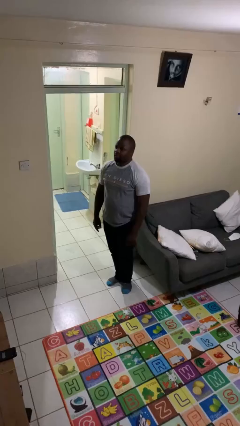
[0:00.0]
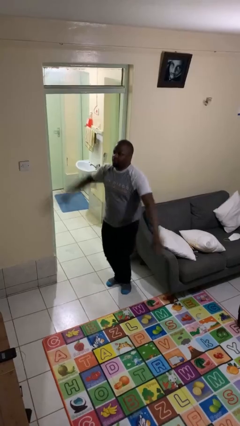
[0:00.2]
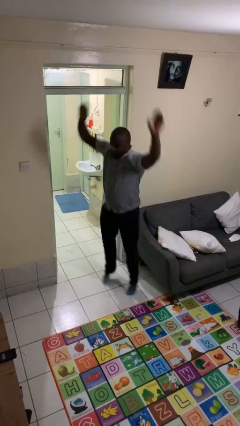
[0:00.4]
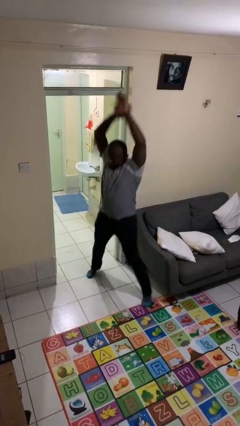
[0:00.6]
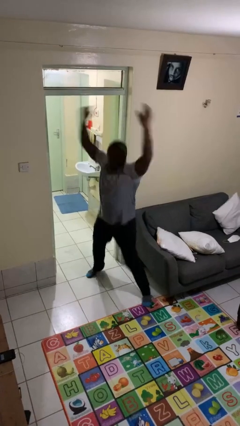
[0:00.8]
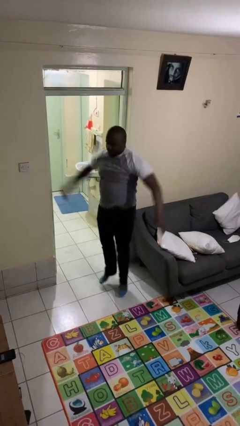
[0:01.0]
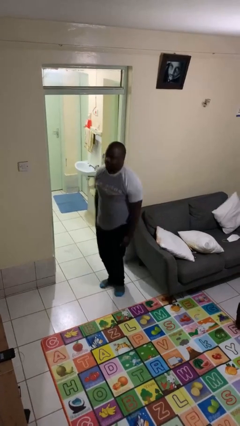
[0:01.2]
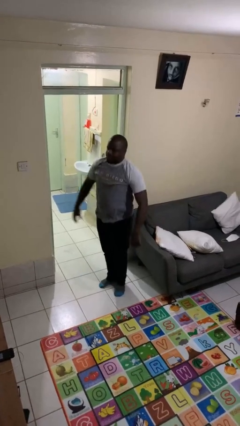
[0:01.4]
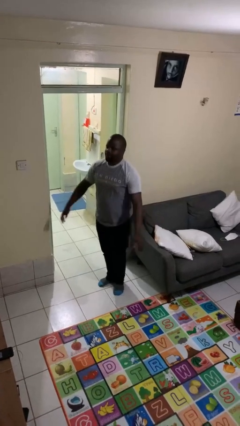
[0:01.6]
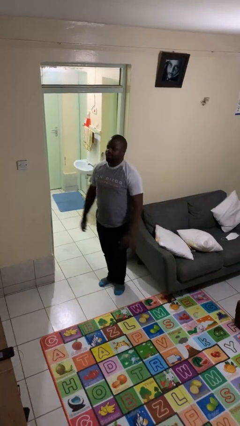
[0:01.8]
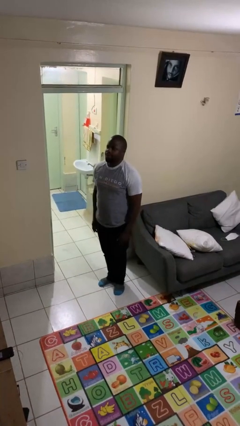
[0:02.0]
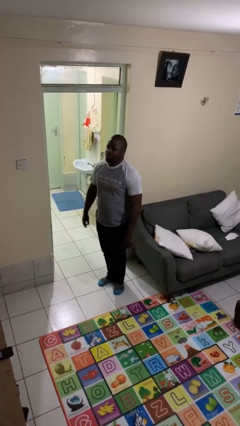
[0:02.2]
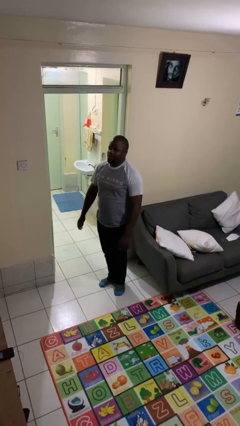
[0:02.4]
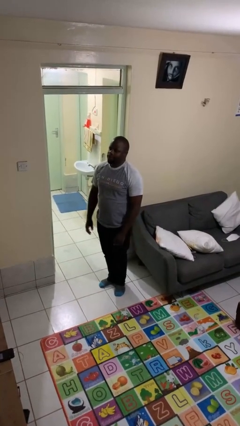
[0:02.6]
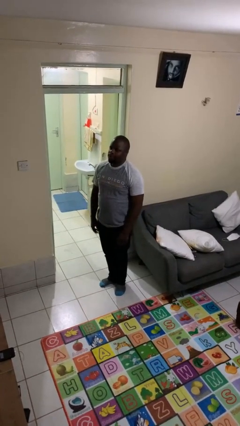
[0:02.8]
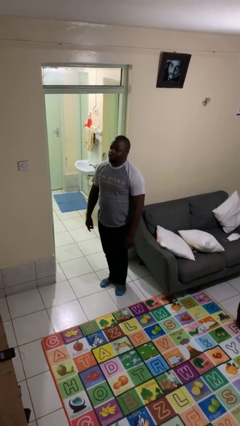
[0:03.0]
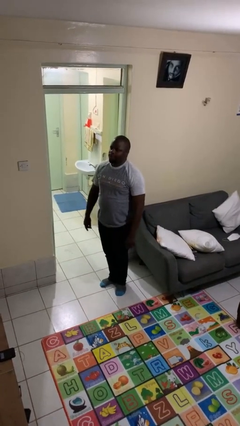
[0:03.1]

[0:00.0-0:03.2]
person exercises with jumping jacks

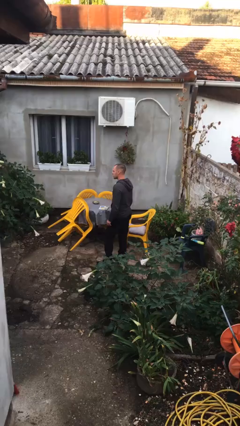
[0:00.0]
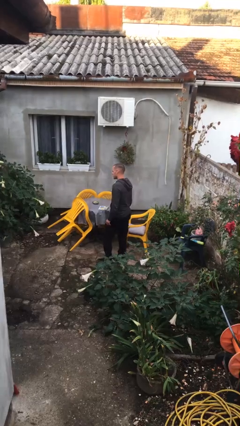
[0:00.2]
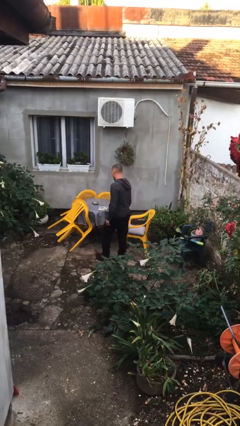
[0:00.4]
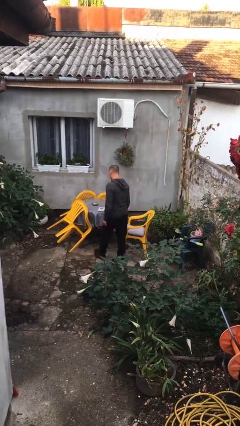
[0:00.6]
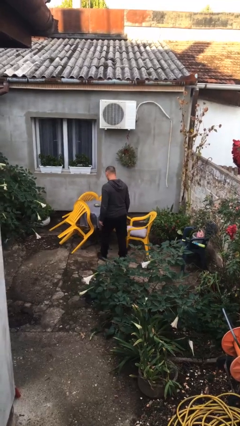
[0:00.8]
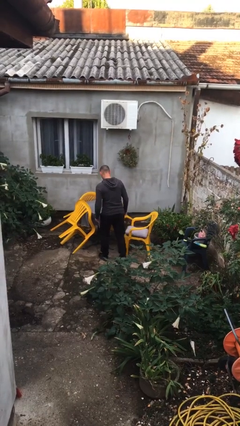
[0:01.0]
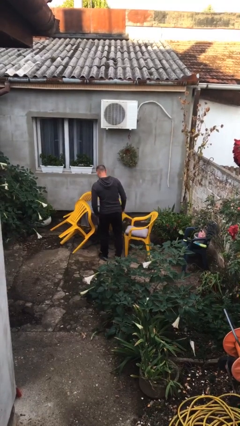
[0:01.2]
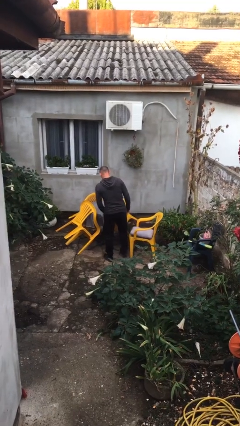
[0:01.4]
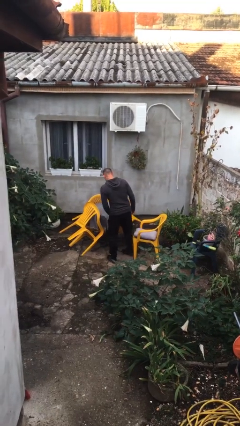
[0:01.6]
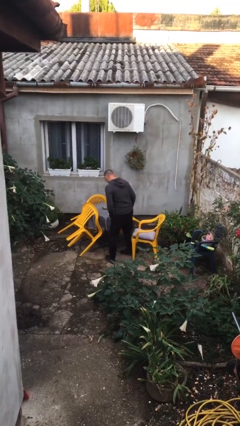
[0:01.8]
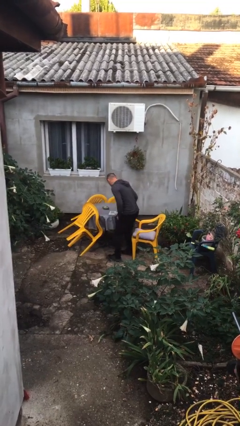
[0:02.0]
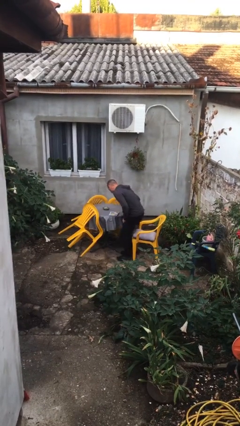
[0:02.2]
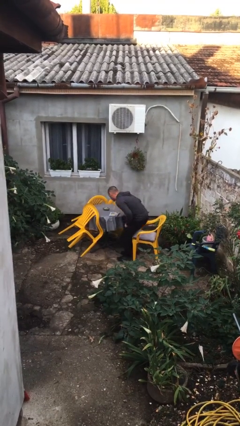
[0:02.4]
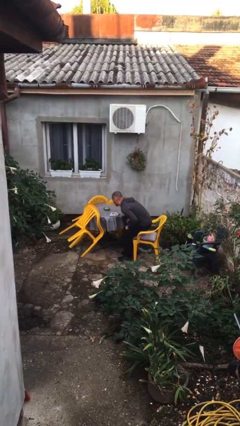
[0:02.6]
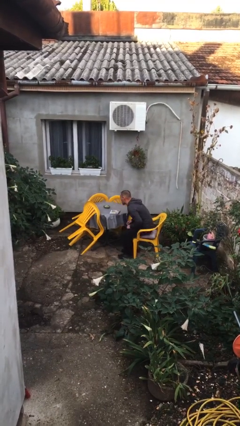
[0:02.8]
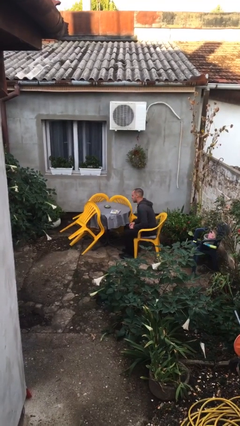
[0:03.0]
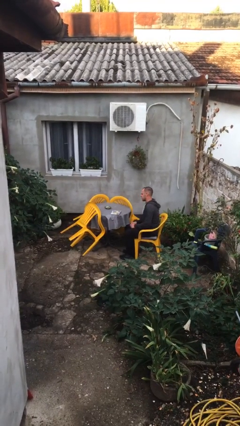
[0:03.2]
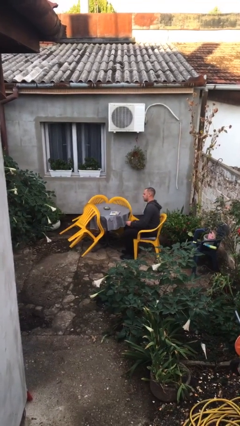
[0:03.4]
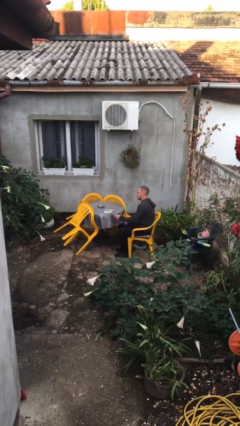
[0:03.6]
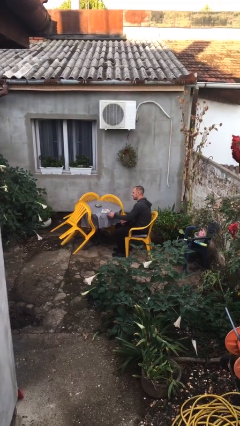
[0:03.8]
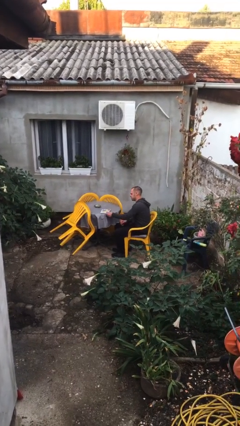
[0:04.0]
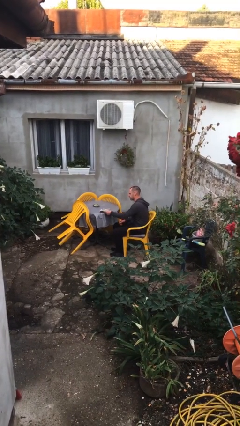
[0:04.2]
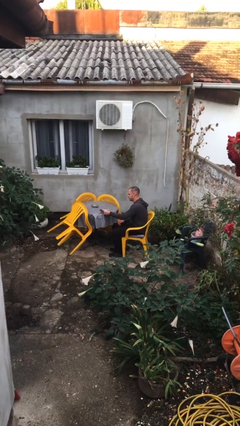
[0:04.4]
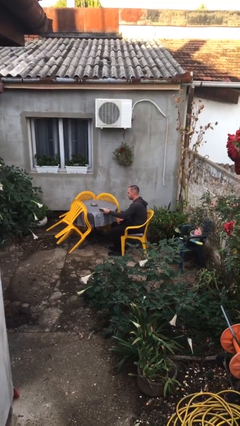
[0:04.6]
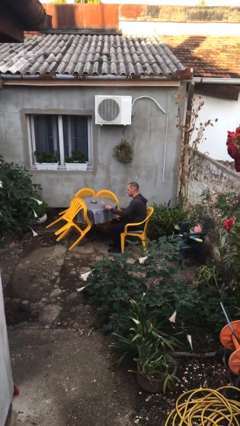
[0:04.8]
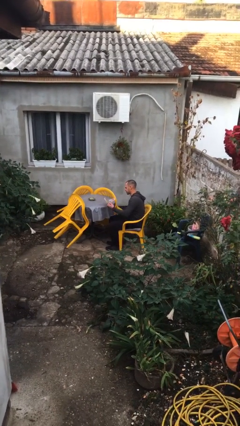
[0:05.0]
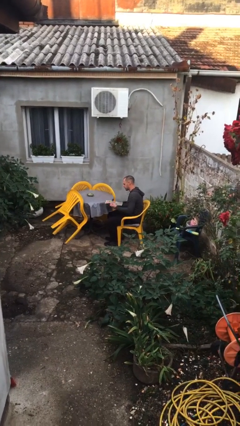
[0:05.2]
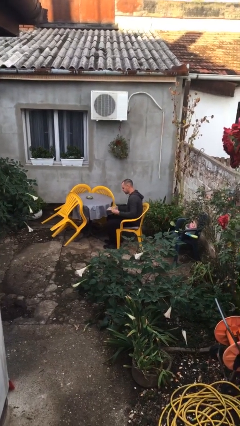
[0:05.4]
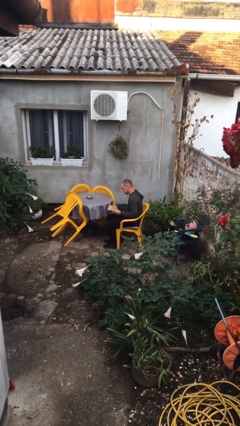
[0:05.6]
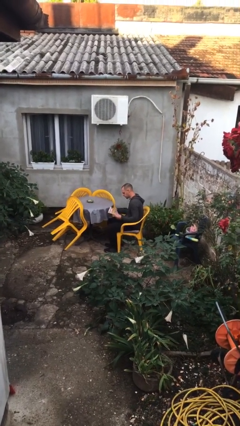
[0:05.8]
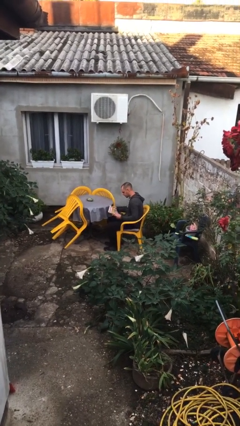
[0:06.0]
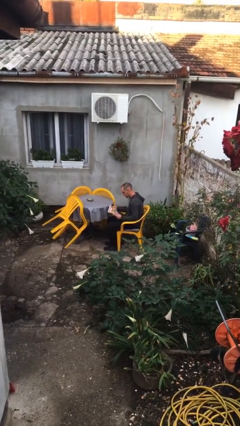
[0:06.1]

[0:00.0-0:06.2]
person sits down

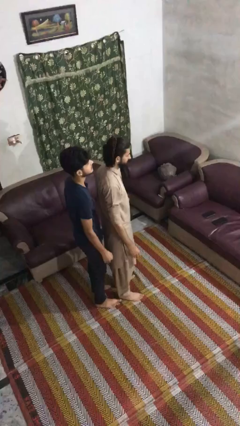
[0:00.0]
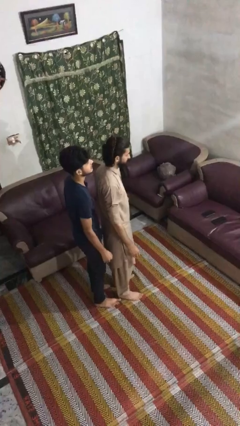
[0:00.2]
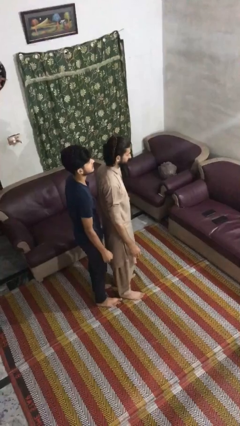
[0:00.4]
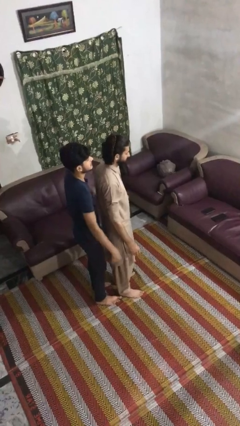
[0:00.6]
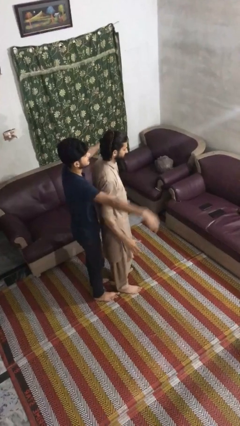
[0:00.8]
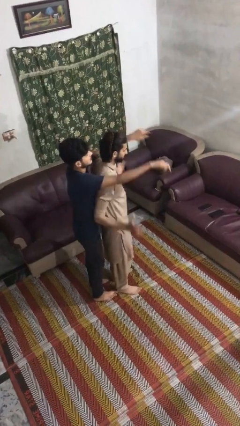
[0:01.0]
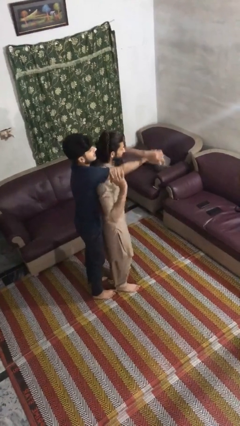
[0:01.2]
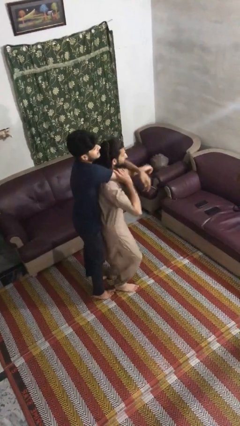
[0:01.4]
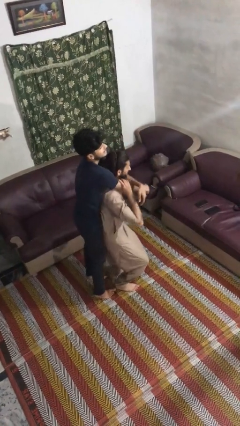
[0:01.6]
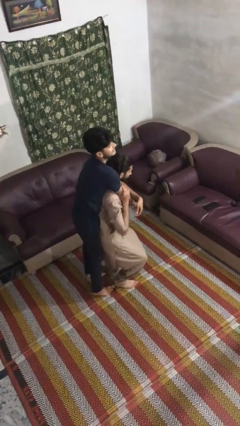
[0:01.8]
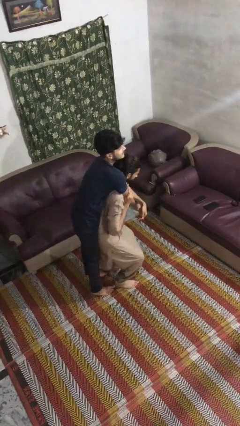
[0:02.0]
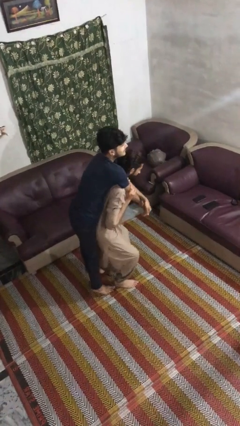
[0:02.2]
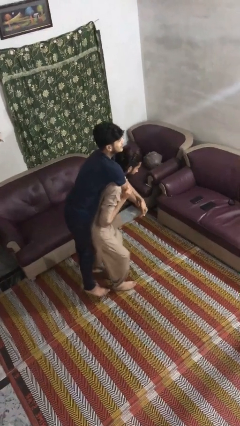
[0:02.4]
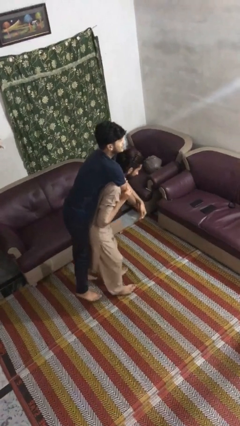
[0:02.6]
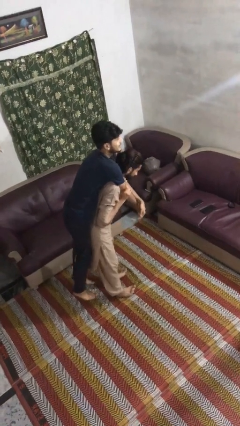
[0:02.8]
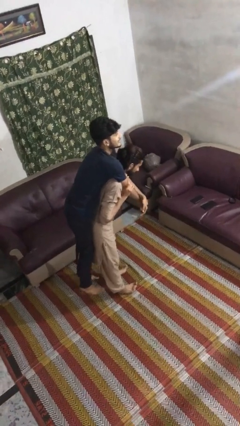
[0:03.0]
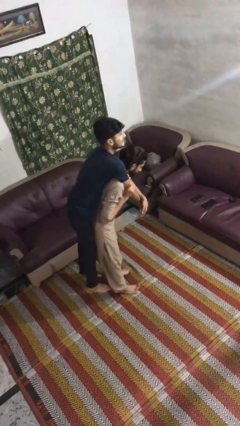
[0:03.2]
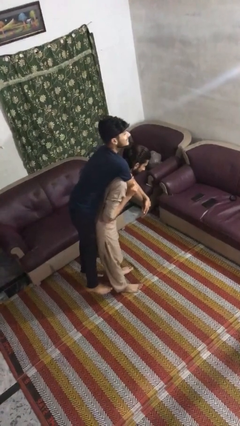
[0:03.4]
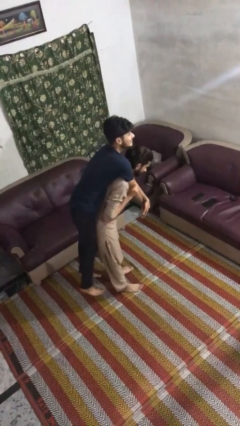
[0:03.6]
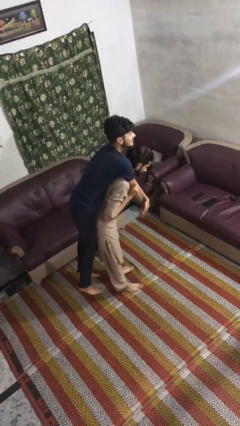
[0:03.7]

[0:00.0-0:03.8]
person carries person over shoulder

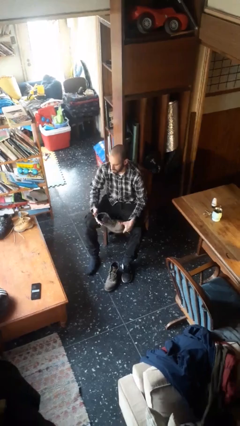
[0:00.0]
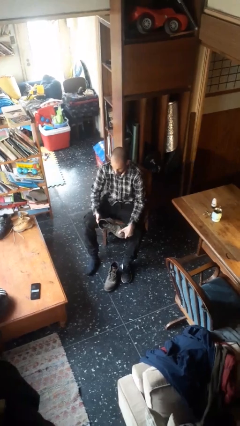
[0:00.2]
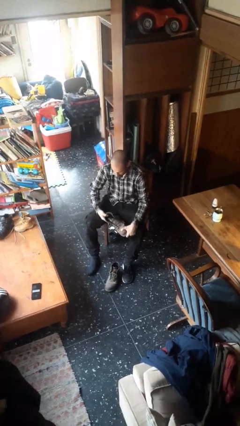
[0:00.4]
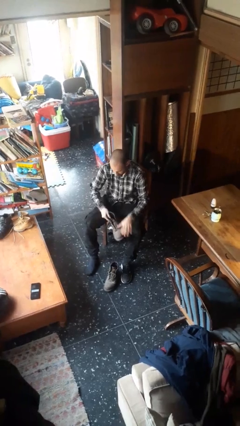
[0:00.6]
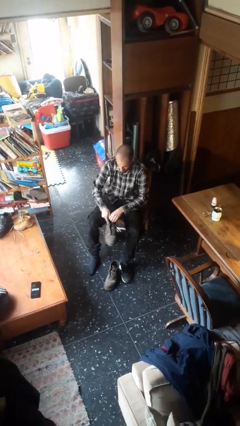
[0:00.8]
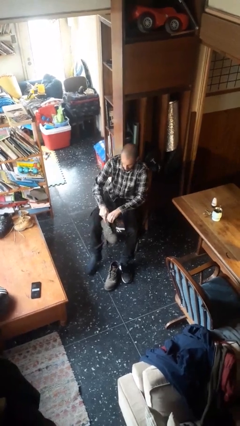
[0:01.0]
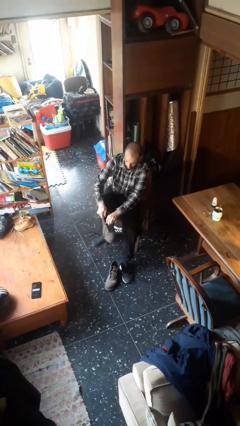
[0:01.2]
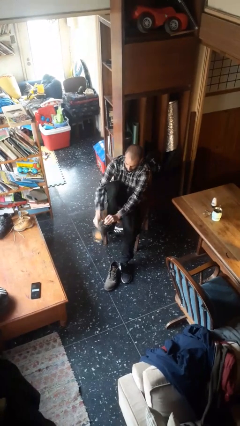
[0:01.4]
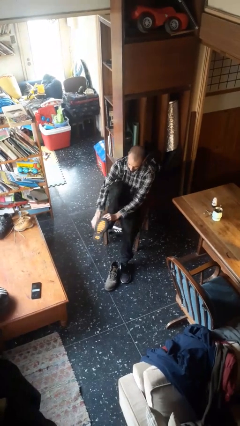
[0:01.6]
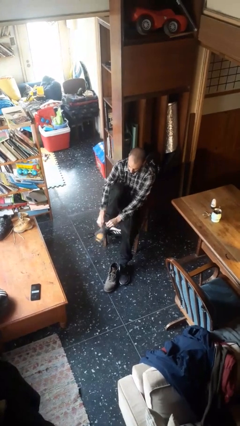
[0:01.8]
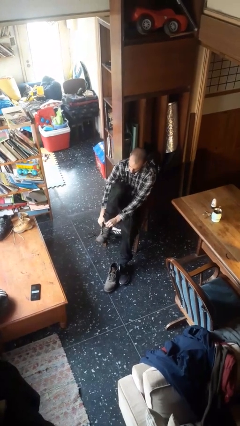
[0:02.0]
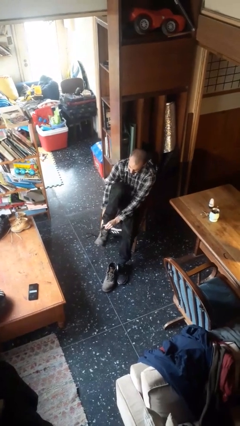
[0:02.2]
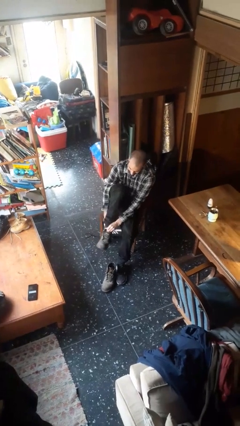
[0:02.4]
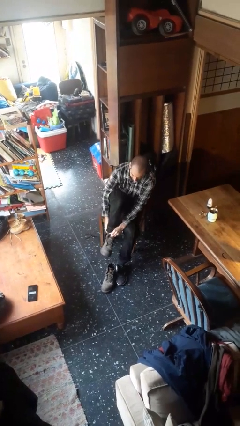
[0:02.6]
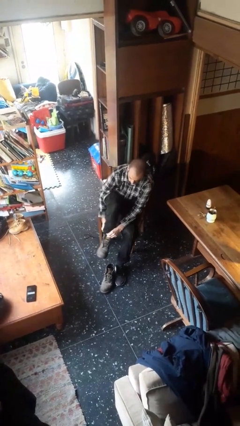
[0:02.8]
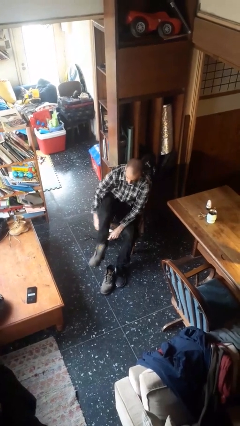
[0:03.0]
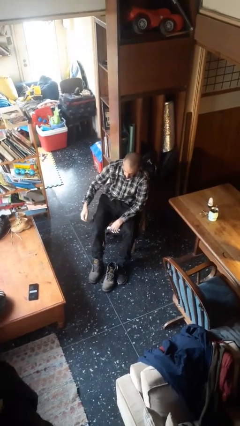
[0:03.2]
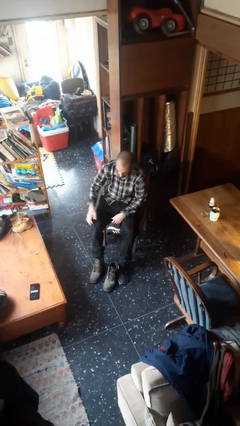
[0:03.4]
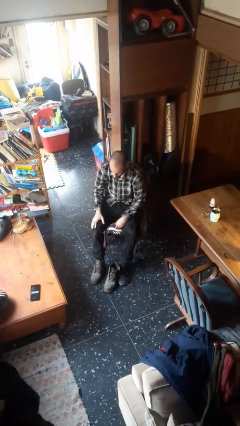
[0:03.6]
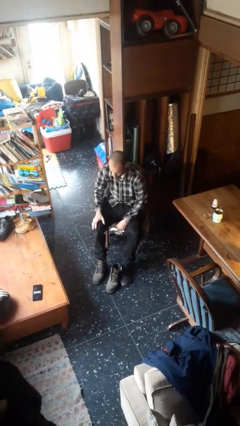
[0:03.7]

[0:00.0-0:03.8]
person puts on boots

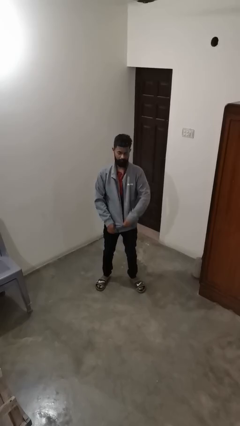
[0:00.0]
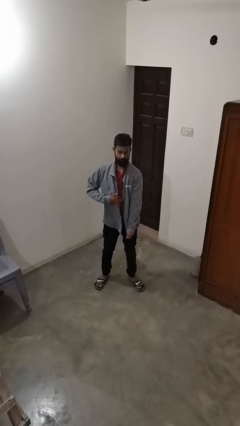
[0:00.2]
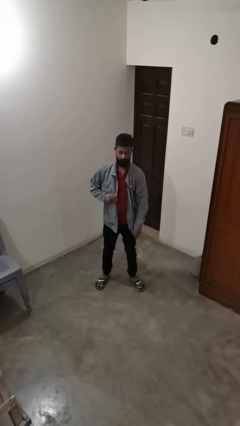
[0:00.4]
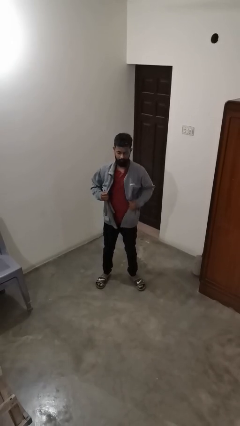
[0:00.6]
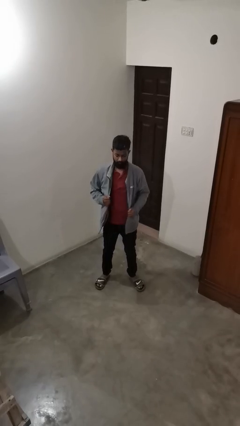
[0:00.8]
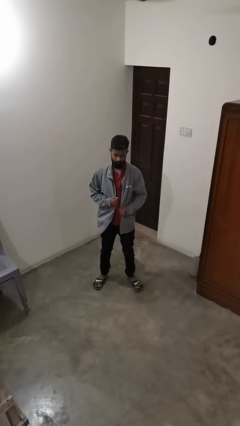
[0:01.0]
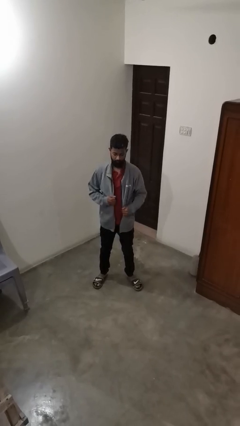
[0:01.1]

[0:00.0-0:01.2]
person unzips jacket
